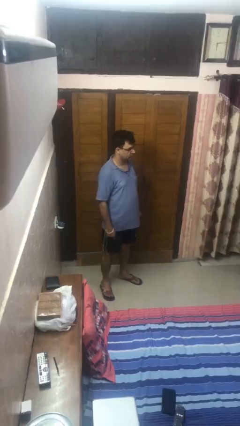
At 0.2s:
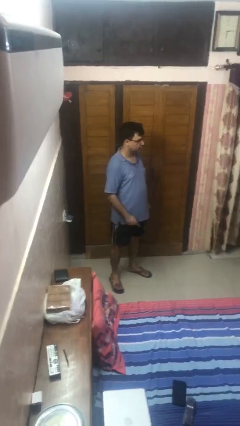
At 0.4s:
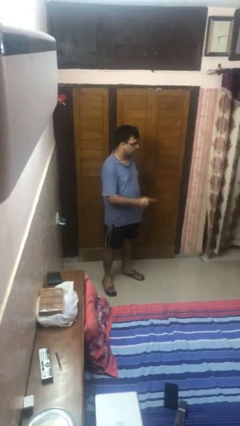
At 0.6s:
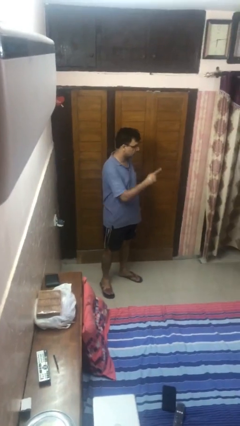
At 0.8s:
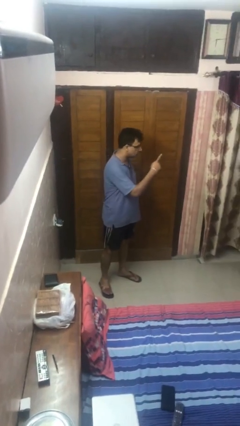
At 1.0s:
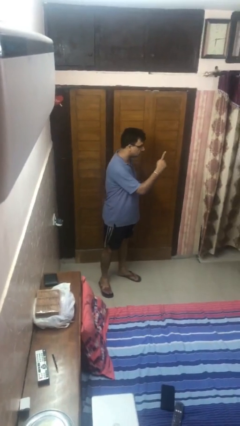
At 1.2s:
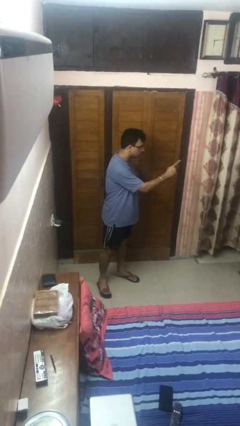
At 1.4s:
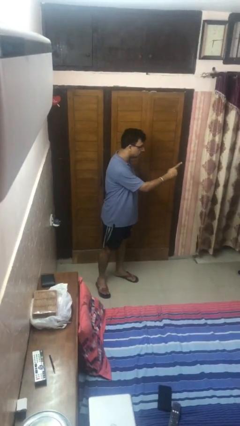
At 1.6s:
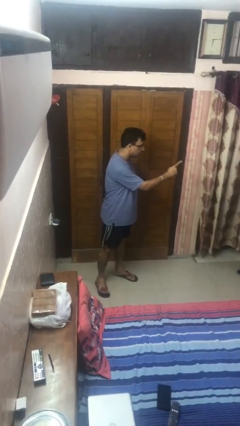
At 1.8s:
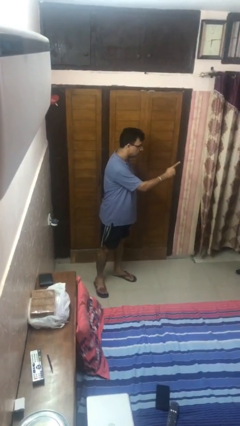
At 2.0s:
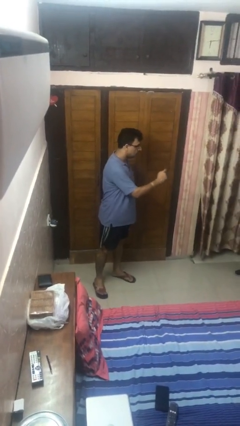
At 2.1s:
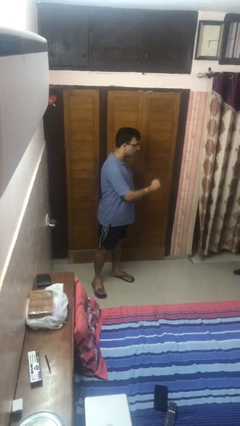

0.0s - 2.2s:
person points at person

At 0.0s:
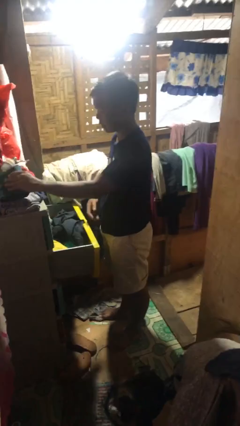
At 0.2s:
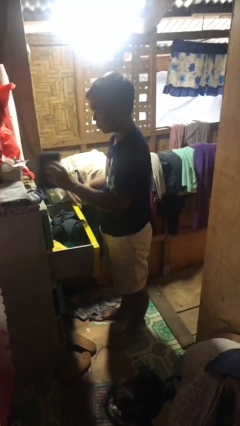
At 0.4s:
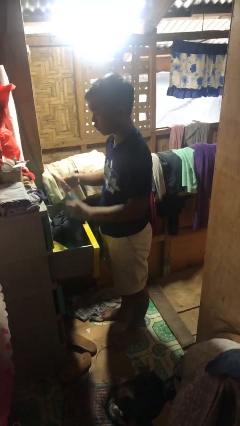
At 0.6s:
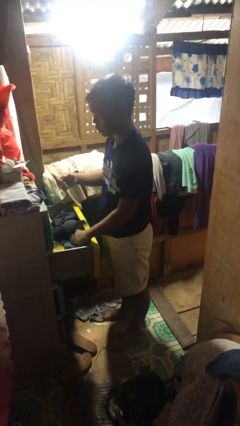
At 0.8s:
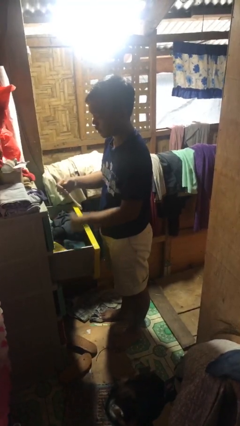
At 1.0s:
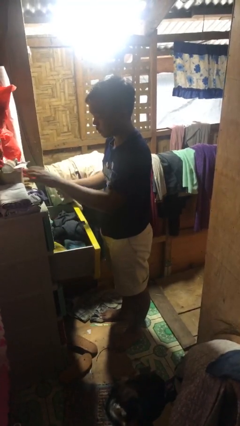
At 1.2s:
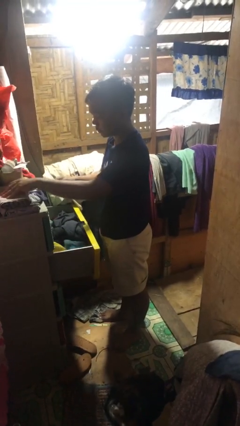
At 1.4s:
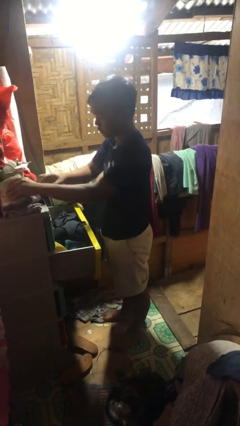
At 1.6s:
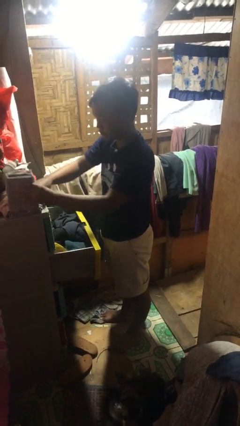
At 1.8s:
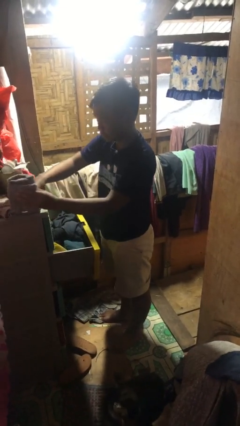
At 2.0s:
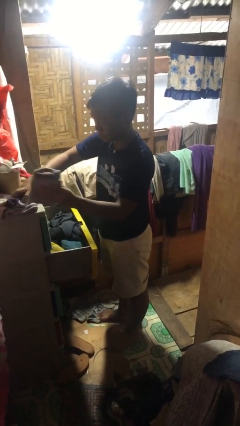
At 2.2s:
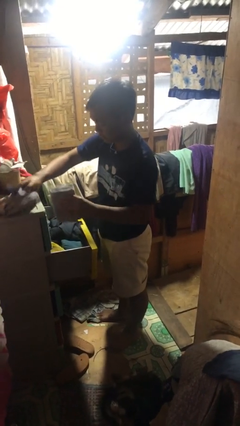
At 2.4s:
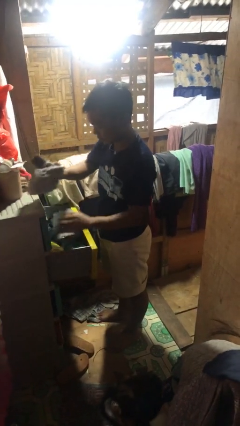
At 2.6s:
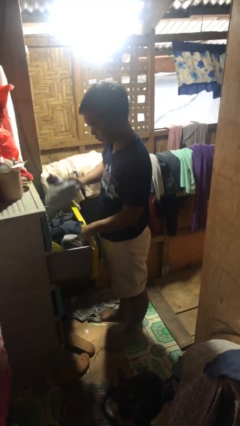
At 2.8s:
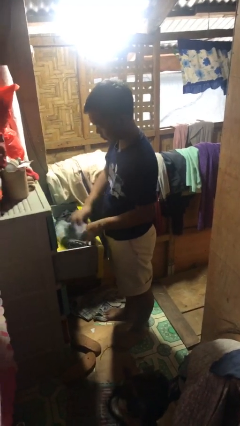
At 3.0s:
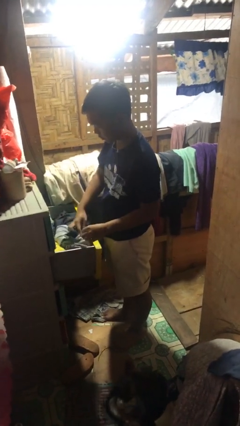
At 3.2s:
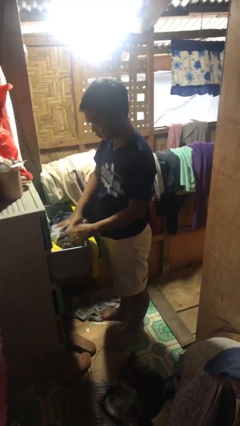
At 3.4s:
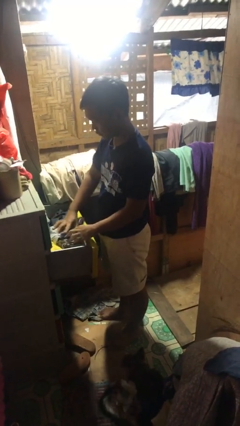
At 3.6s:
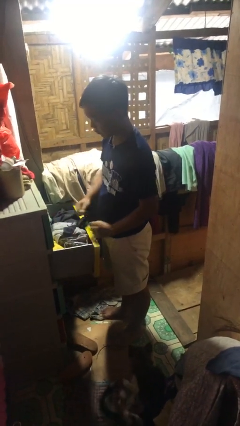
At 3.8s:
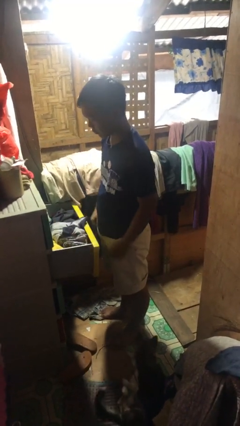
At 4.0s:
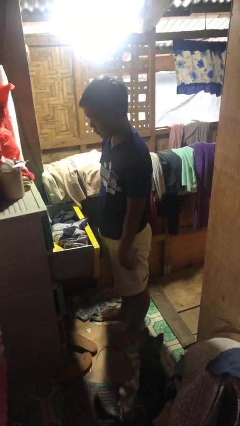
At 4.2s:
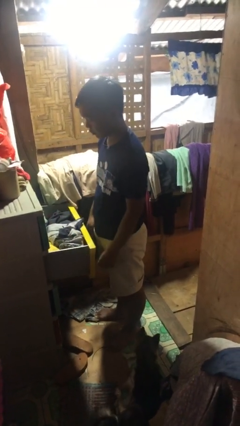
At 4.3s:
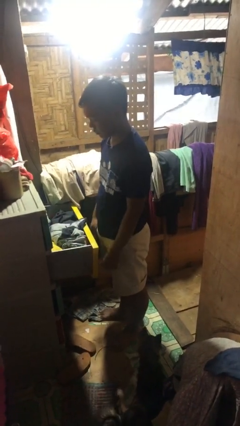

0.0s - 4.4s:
person puts clothes into dresser

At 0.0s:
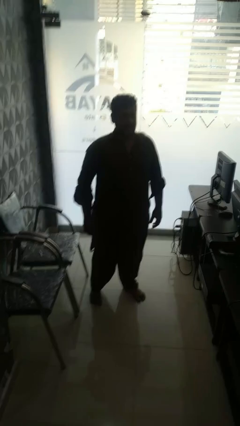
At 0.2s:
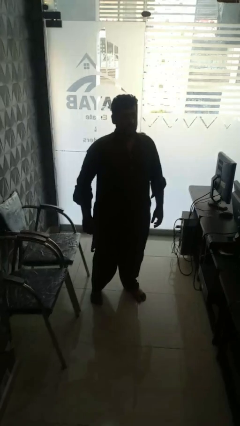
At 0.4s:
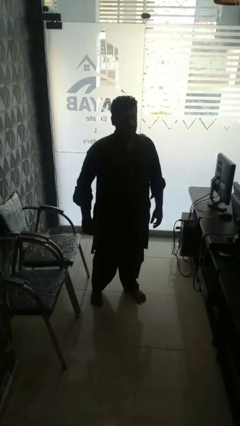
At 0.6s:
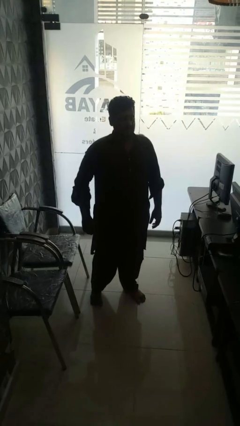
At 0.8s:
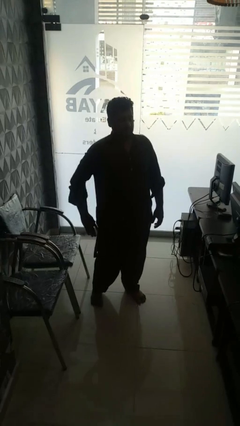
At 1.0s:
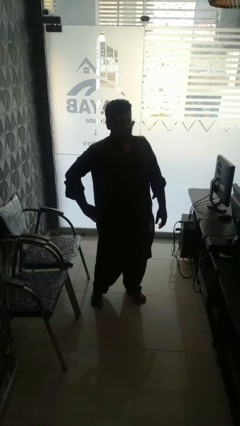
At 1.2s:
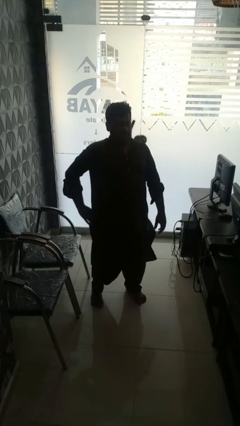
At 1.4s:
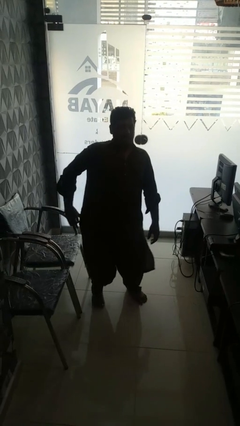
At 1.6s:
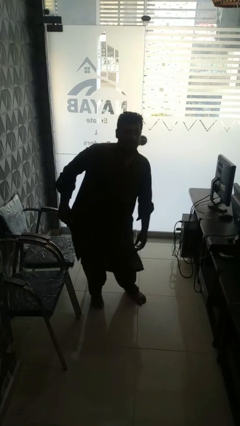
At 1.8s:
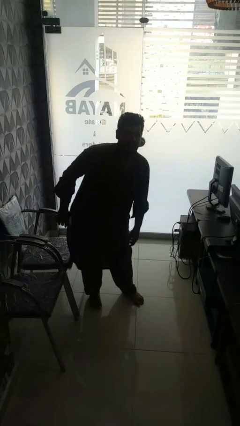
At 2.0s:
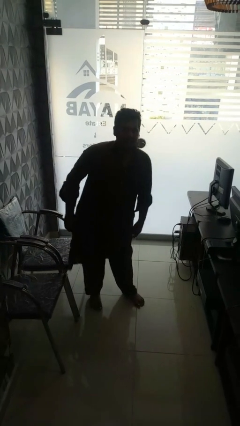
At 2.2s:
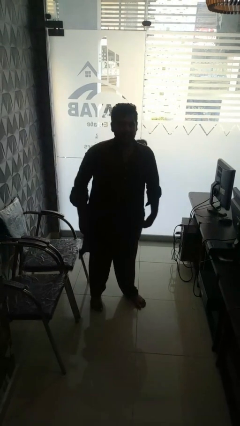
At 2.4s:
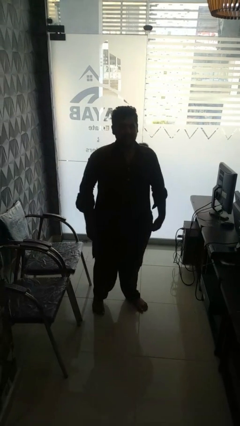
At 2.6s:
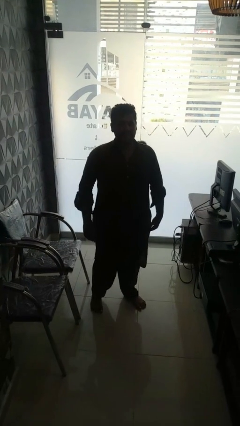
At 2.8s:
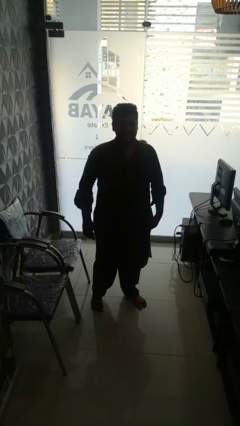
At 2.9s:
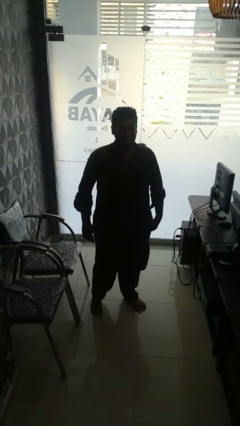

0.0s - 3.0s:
person wiggles hips

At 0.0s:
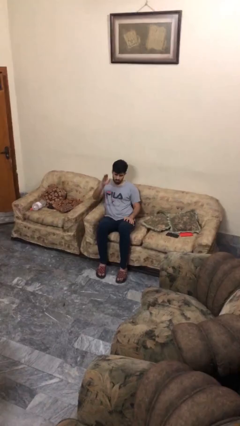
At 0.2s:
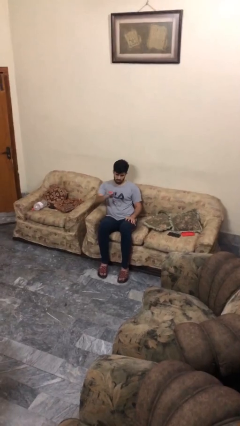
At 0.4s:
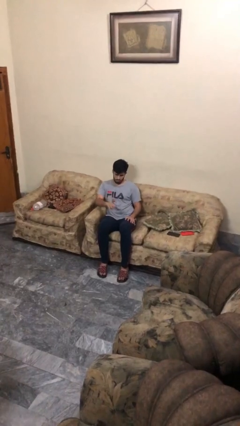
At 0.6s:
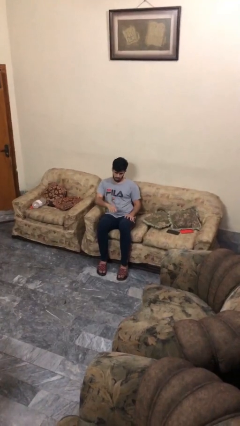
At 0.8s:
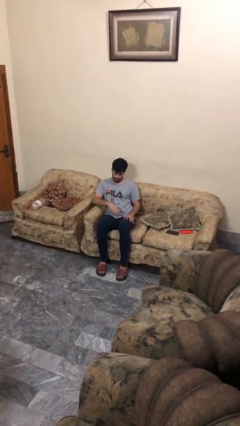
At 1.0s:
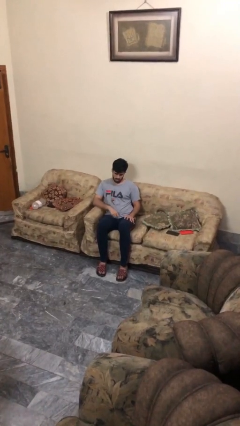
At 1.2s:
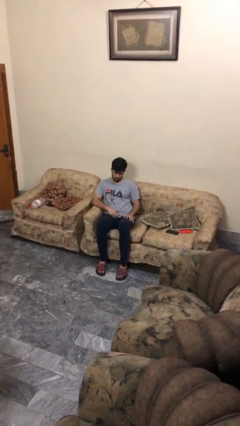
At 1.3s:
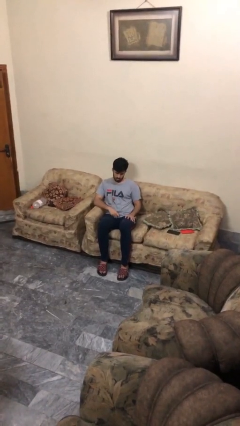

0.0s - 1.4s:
person gestures swipe down

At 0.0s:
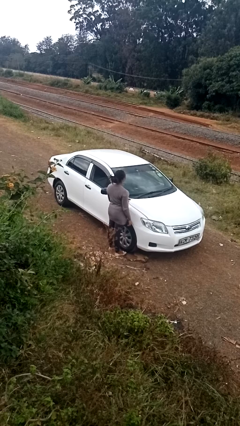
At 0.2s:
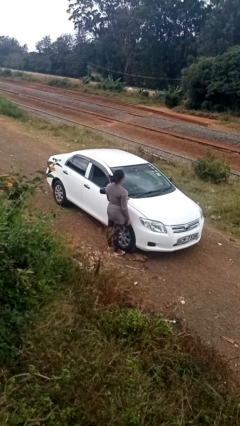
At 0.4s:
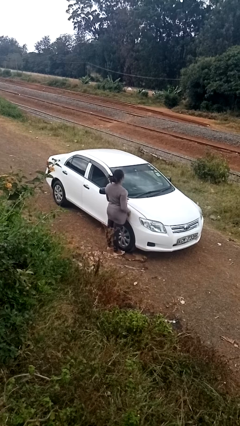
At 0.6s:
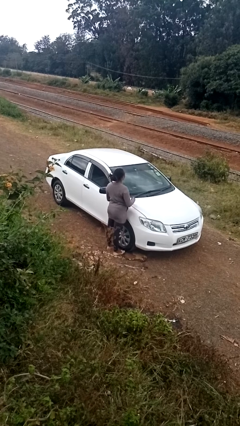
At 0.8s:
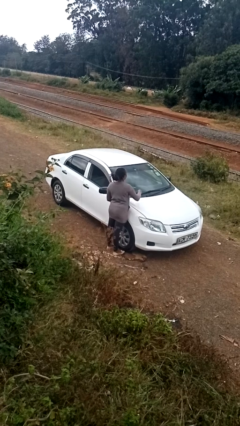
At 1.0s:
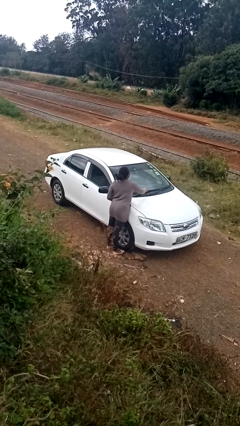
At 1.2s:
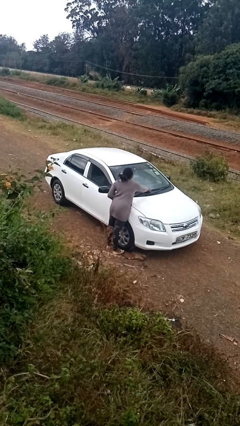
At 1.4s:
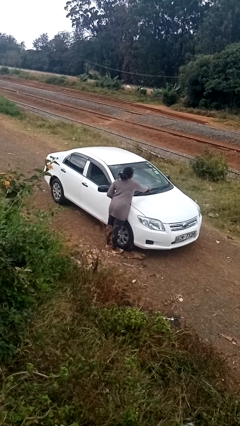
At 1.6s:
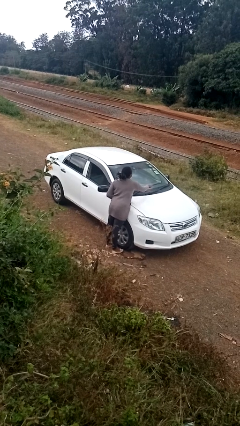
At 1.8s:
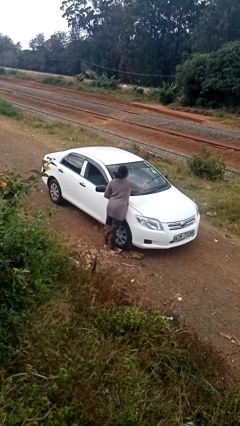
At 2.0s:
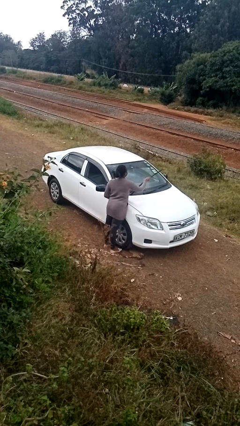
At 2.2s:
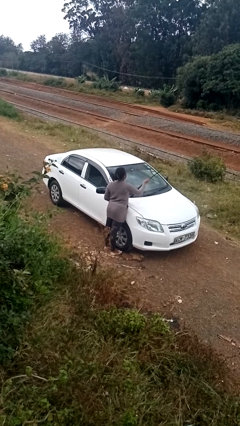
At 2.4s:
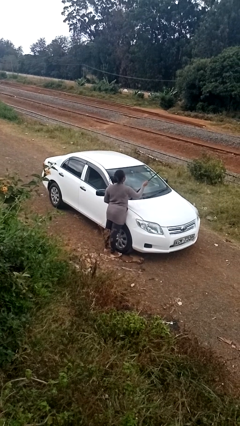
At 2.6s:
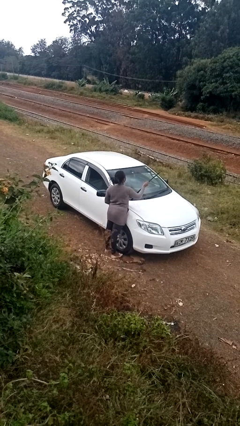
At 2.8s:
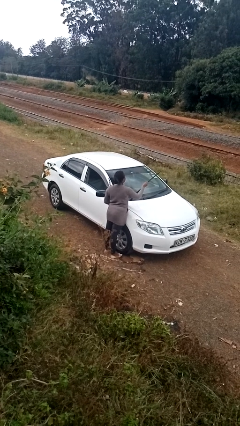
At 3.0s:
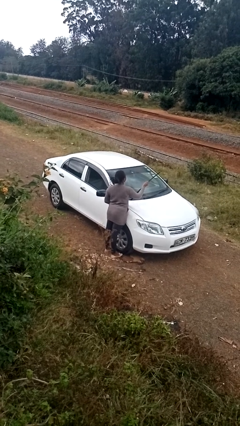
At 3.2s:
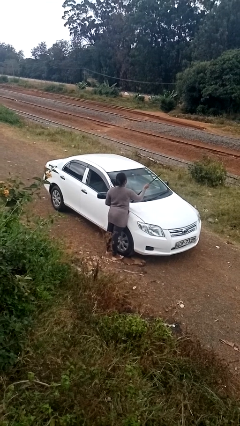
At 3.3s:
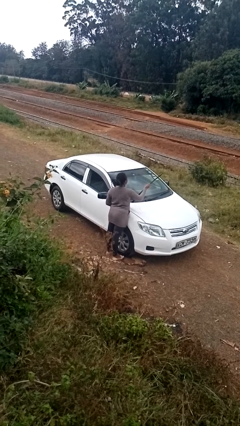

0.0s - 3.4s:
person flips up car wipers

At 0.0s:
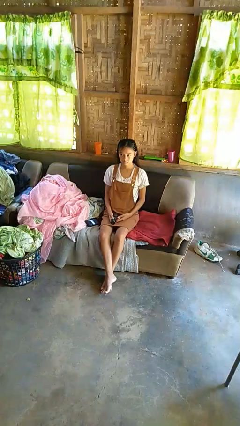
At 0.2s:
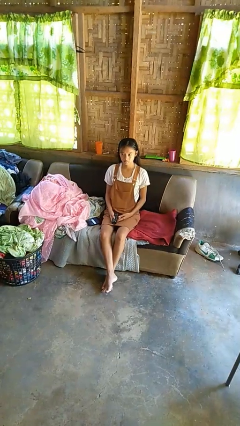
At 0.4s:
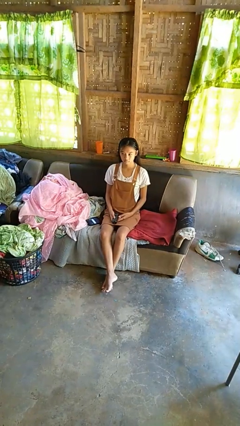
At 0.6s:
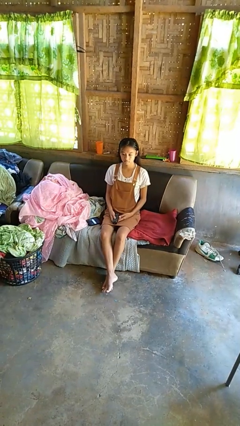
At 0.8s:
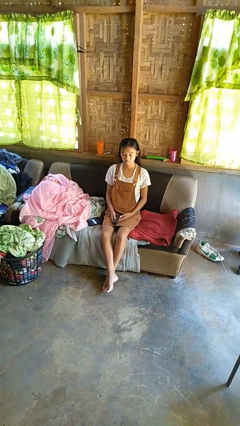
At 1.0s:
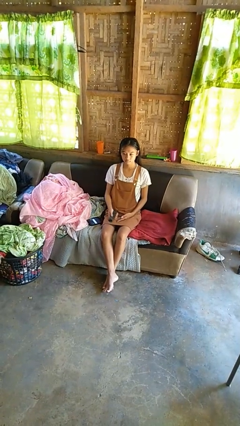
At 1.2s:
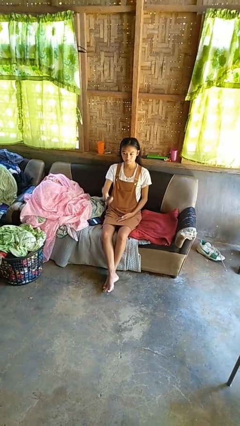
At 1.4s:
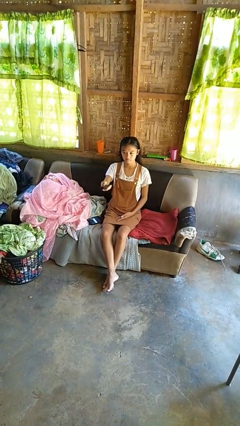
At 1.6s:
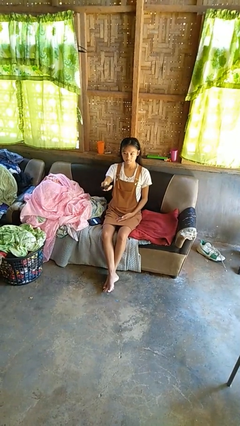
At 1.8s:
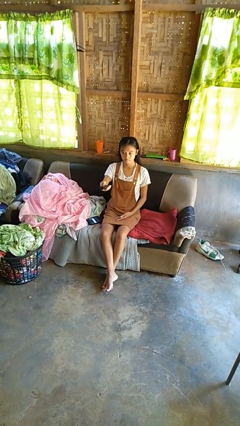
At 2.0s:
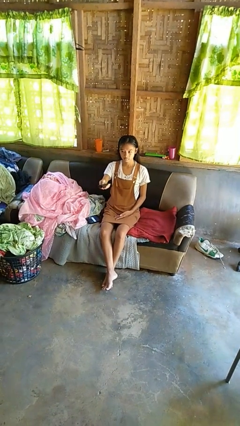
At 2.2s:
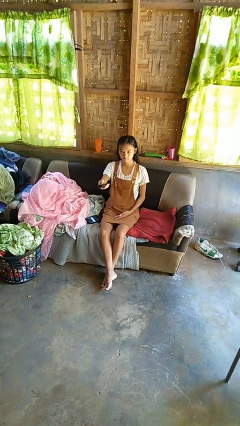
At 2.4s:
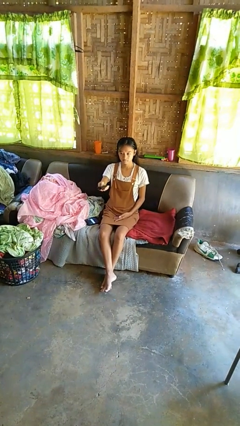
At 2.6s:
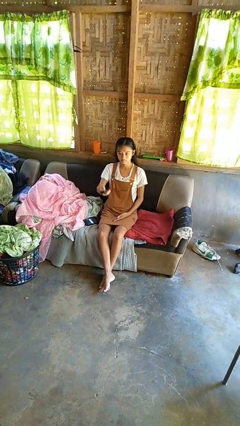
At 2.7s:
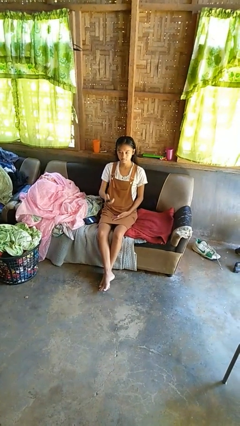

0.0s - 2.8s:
person uses television remote

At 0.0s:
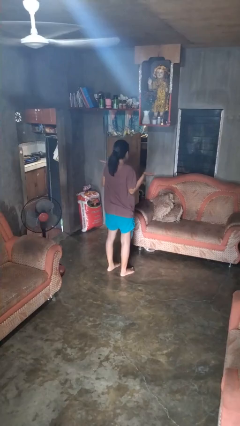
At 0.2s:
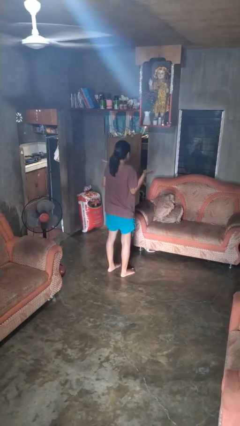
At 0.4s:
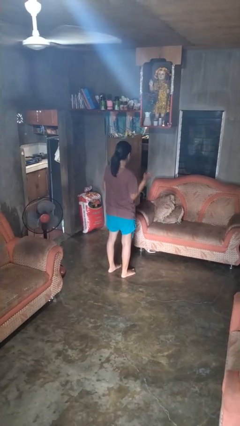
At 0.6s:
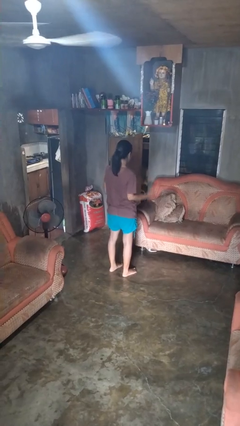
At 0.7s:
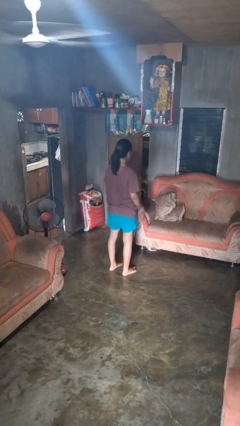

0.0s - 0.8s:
person shrugs
